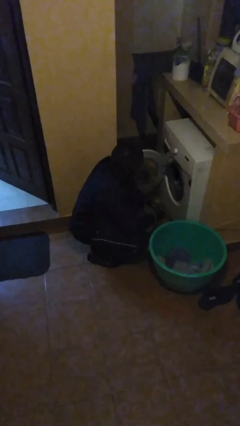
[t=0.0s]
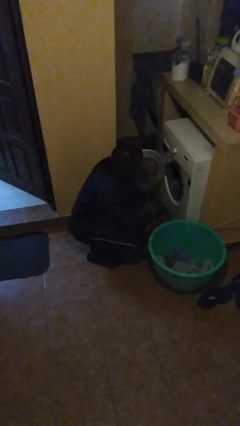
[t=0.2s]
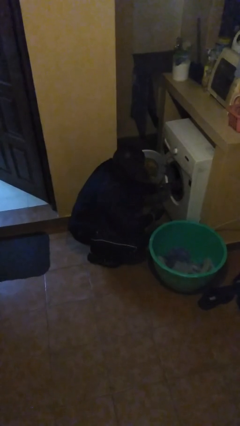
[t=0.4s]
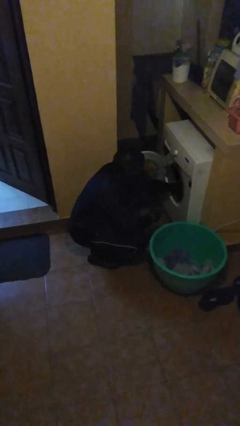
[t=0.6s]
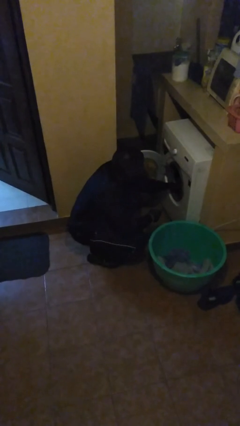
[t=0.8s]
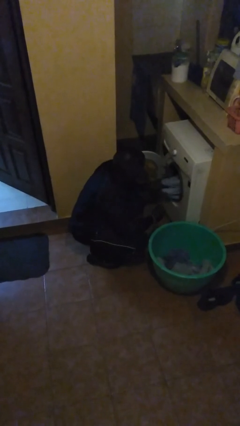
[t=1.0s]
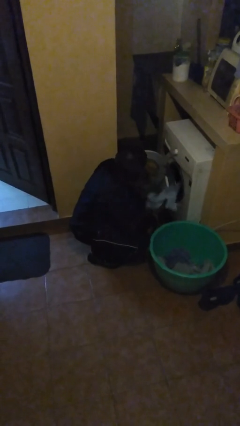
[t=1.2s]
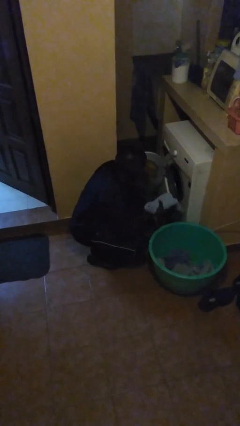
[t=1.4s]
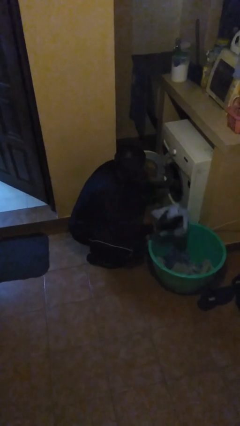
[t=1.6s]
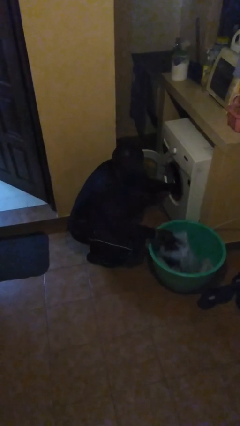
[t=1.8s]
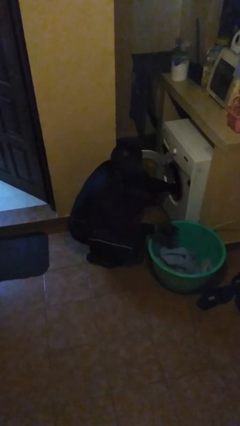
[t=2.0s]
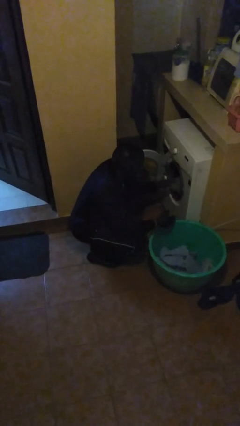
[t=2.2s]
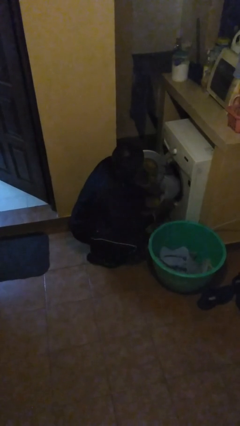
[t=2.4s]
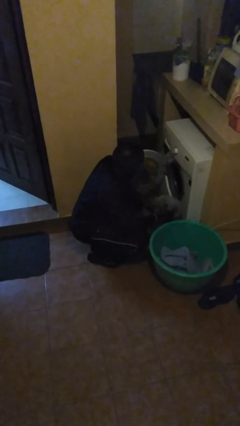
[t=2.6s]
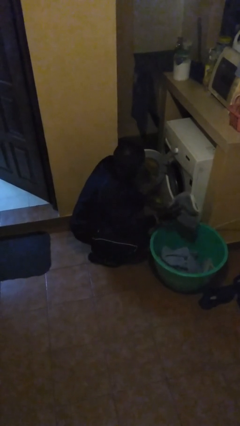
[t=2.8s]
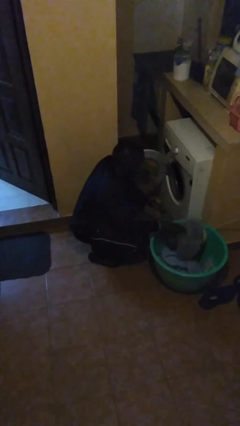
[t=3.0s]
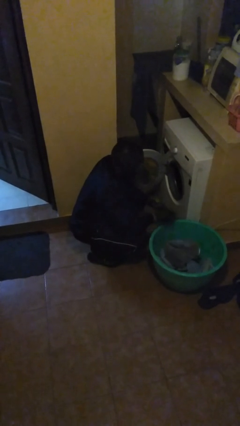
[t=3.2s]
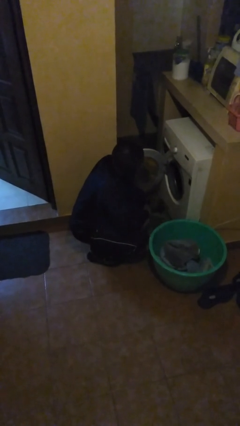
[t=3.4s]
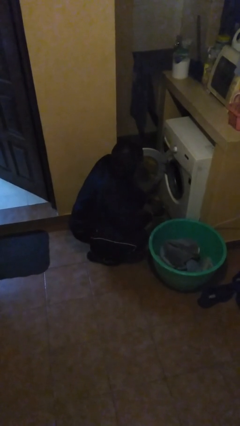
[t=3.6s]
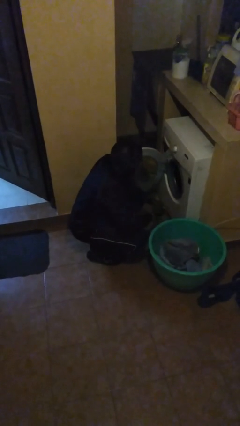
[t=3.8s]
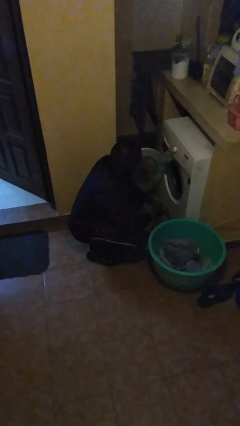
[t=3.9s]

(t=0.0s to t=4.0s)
person loads clotheswasher

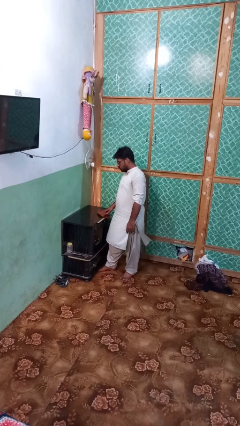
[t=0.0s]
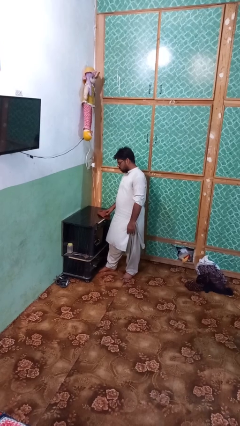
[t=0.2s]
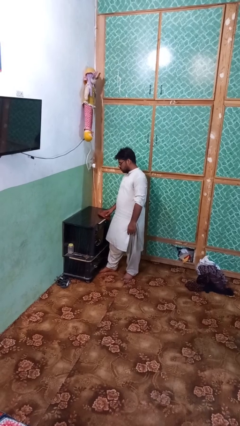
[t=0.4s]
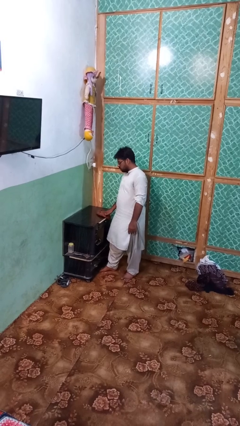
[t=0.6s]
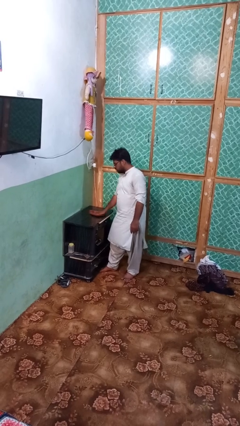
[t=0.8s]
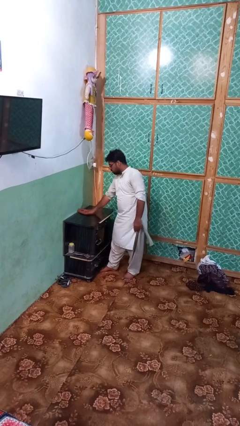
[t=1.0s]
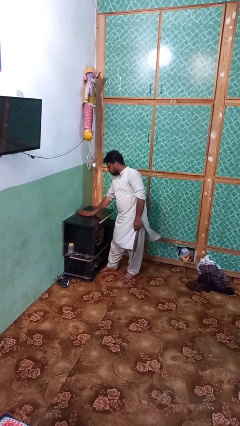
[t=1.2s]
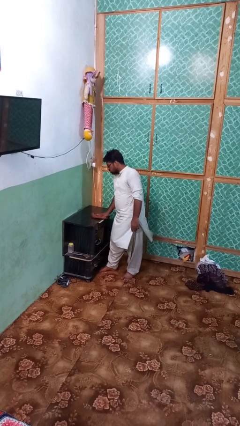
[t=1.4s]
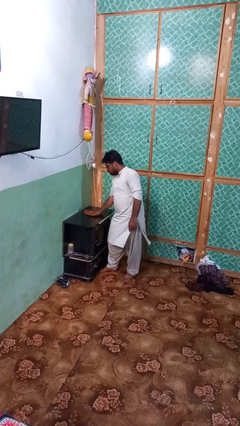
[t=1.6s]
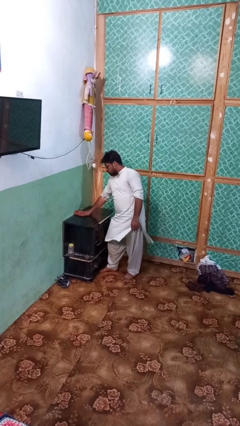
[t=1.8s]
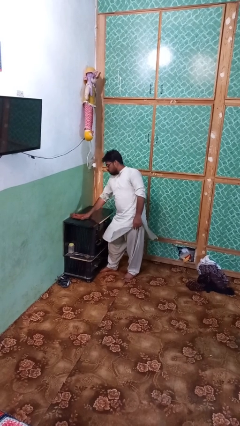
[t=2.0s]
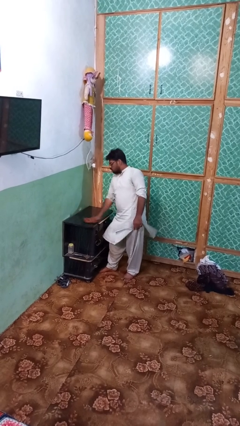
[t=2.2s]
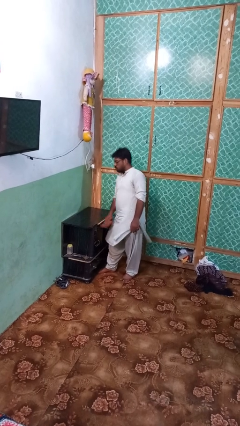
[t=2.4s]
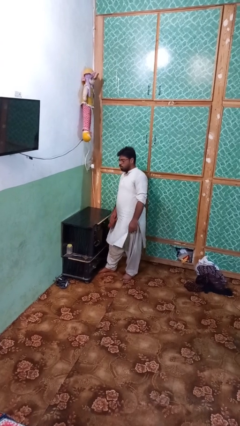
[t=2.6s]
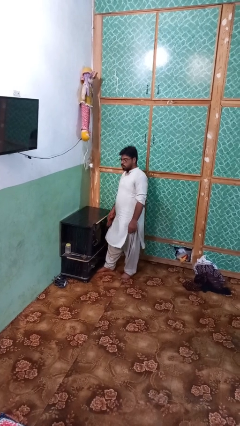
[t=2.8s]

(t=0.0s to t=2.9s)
person cleans table with rag

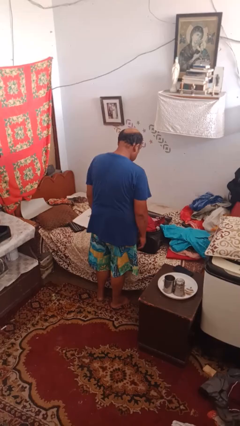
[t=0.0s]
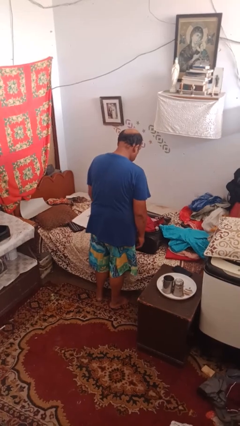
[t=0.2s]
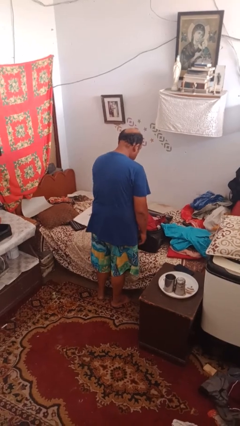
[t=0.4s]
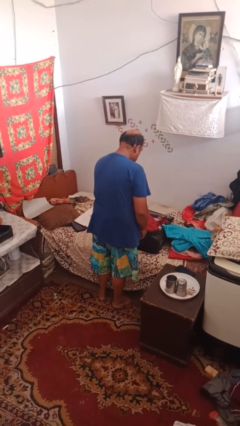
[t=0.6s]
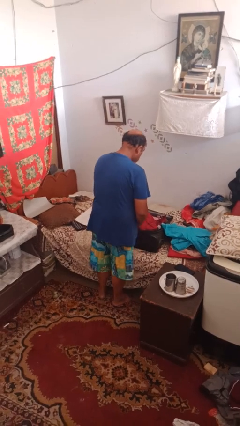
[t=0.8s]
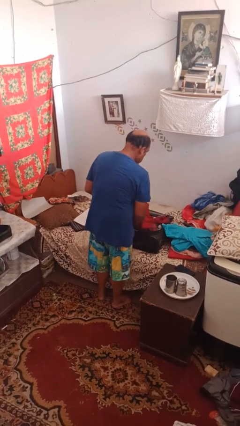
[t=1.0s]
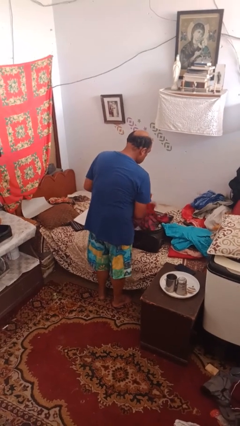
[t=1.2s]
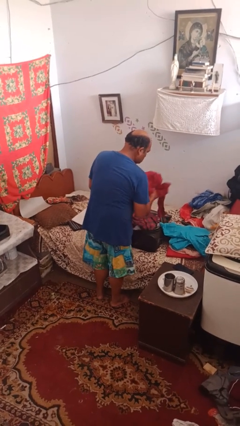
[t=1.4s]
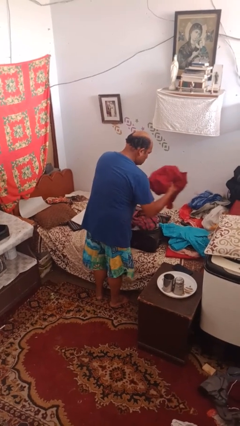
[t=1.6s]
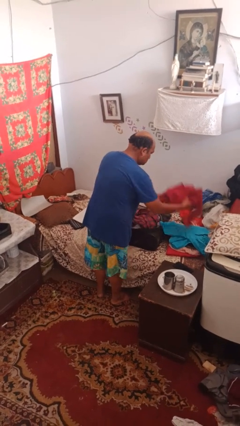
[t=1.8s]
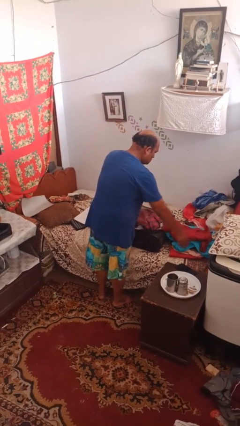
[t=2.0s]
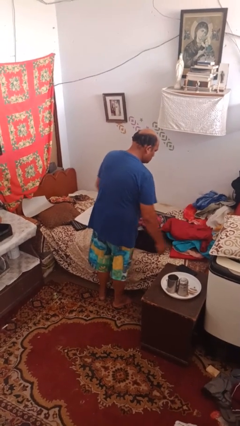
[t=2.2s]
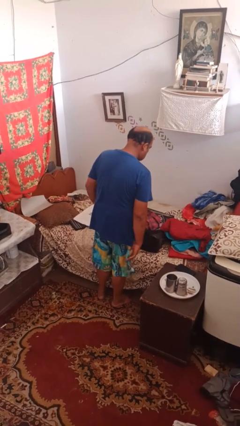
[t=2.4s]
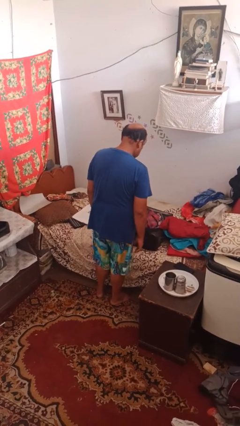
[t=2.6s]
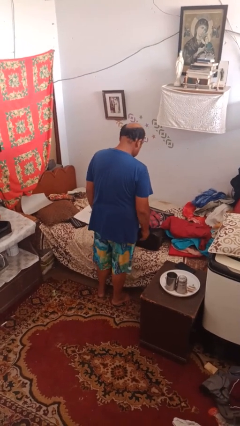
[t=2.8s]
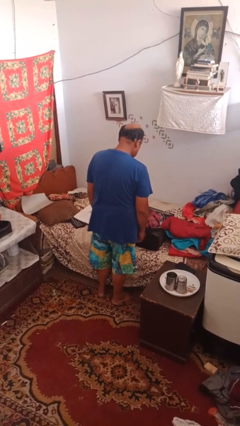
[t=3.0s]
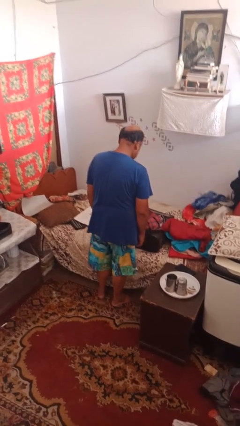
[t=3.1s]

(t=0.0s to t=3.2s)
person unloads clothes from suitcase

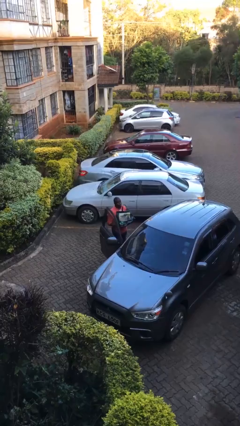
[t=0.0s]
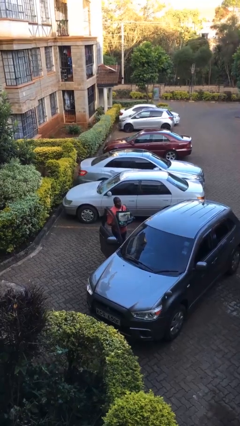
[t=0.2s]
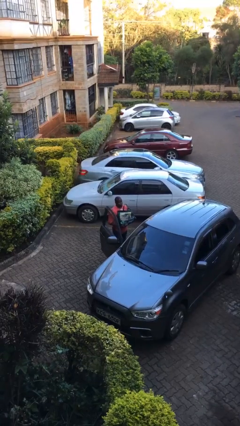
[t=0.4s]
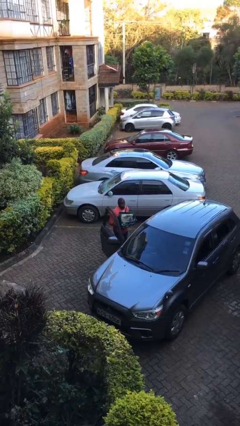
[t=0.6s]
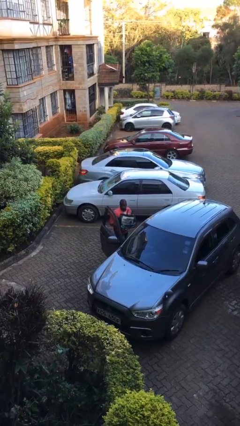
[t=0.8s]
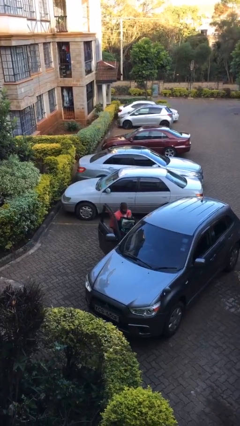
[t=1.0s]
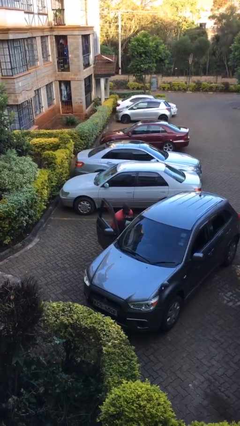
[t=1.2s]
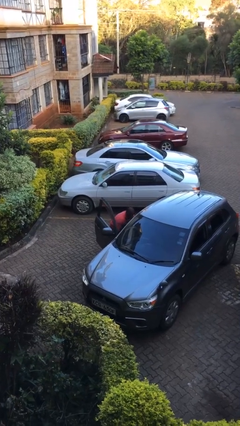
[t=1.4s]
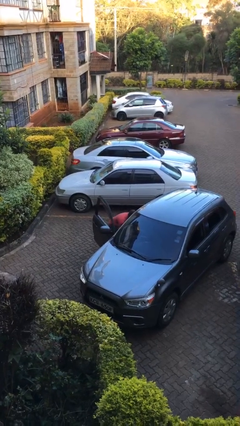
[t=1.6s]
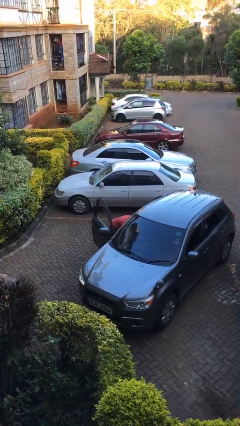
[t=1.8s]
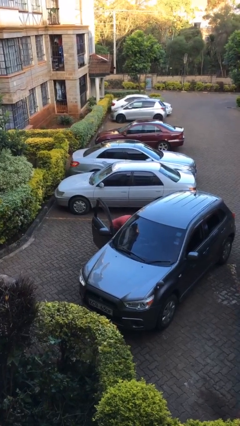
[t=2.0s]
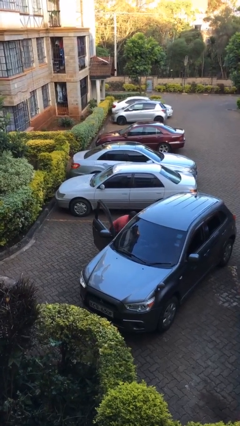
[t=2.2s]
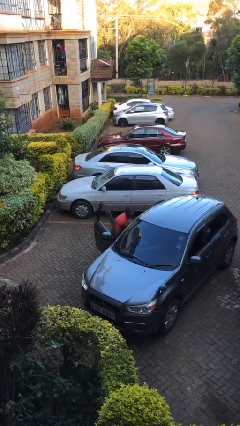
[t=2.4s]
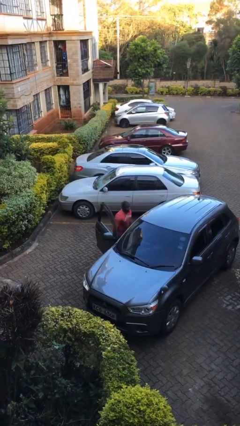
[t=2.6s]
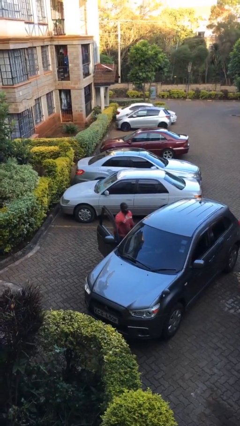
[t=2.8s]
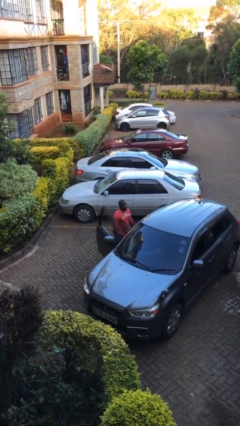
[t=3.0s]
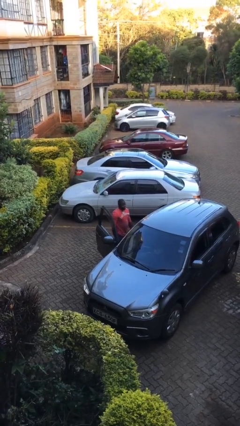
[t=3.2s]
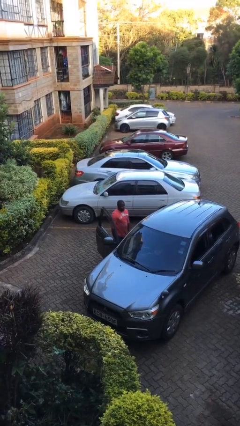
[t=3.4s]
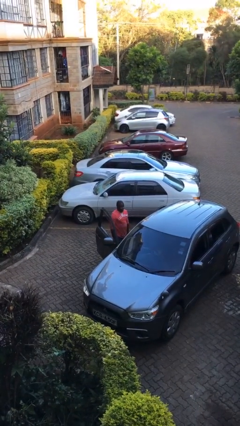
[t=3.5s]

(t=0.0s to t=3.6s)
person loads car

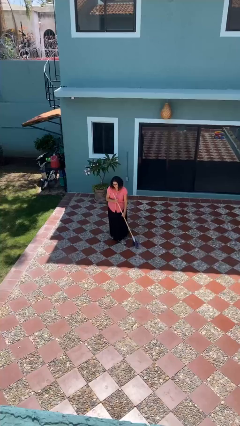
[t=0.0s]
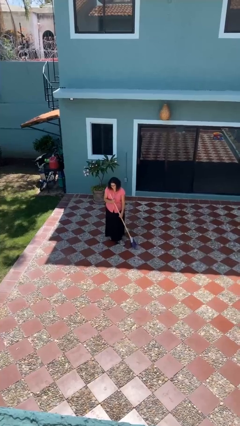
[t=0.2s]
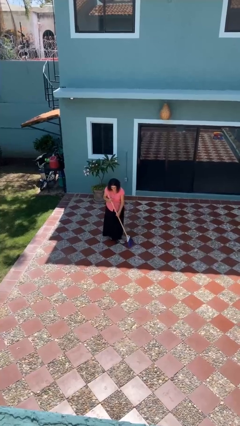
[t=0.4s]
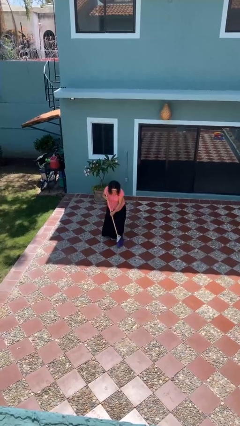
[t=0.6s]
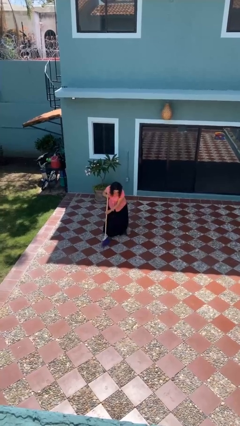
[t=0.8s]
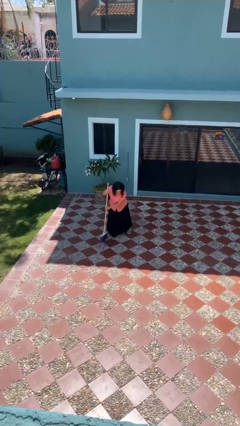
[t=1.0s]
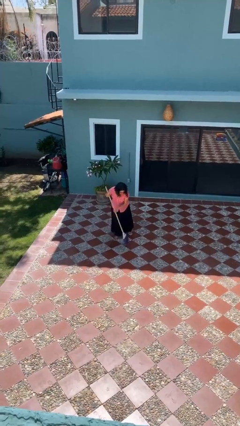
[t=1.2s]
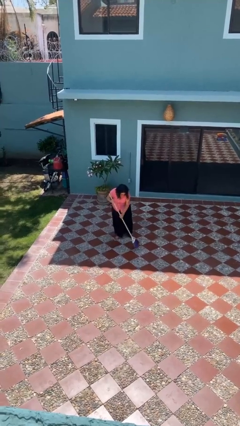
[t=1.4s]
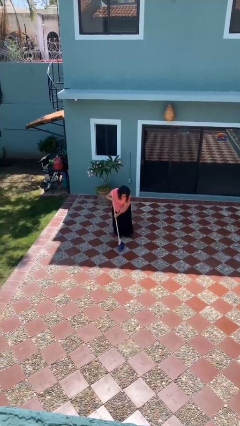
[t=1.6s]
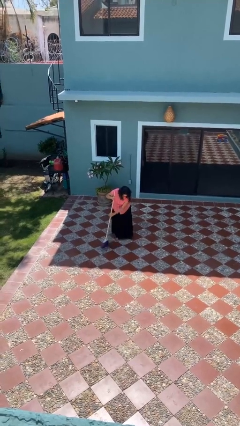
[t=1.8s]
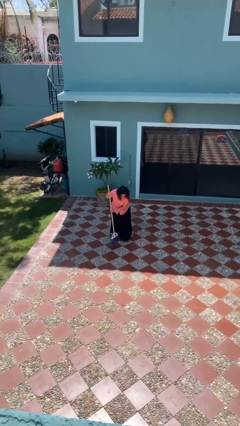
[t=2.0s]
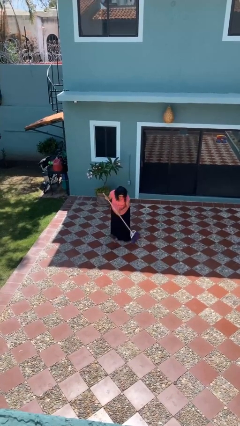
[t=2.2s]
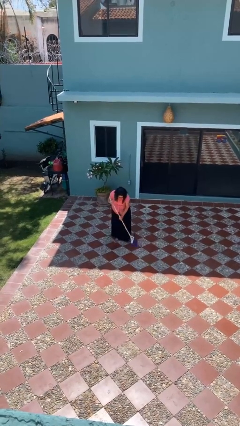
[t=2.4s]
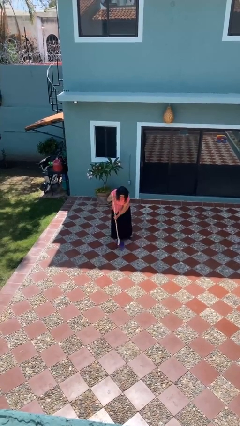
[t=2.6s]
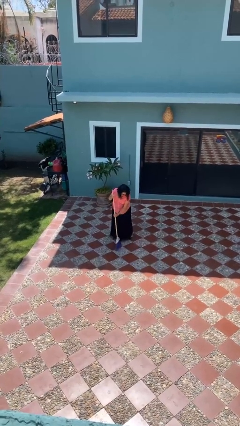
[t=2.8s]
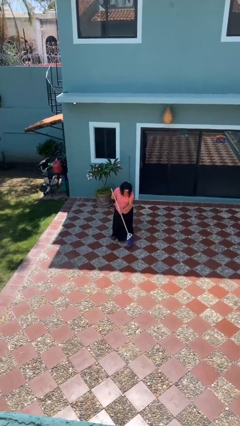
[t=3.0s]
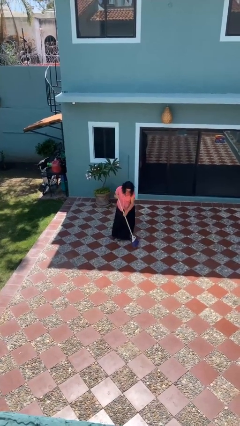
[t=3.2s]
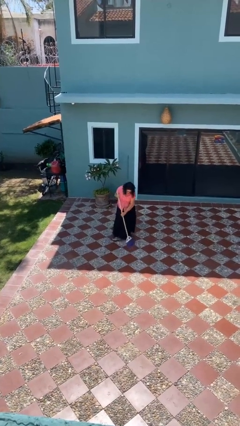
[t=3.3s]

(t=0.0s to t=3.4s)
person sweeps floor

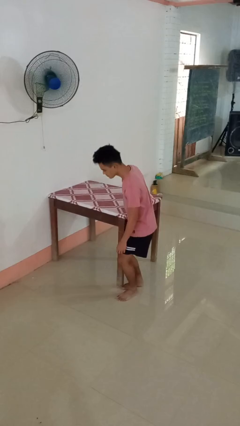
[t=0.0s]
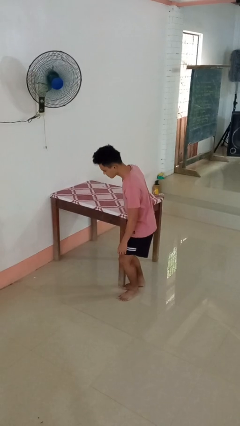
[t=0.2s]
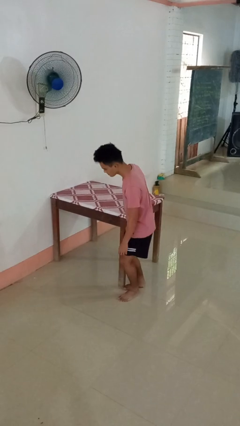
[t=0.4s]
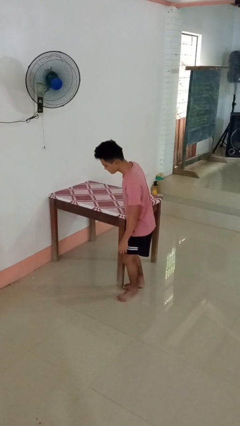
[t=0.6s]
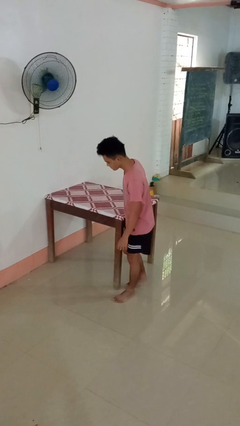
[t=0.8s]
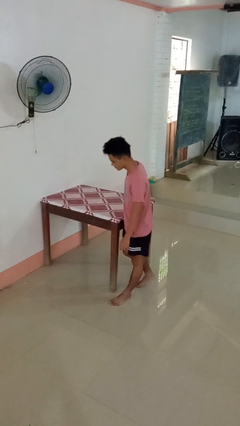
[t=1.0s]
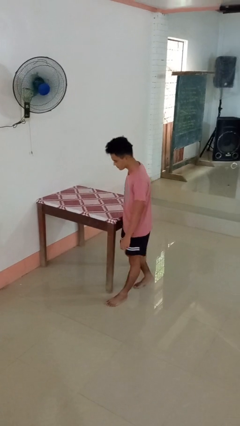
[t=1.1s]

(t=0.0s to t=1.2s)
person stubs toe
